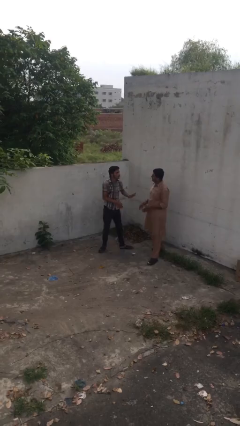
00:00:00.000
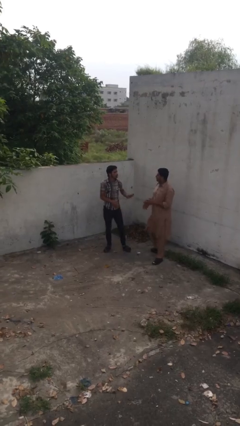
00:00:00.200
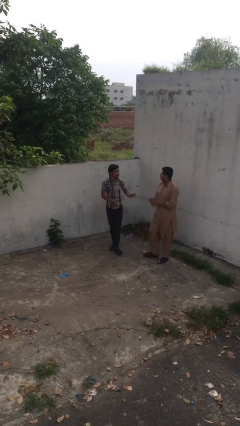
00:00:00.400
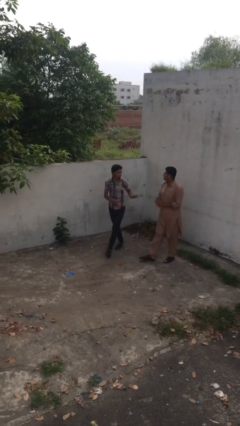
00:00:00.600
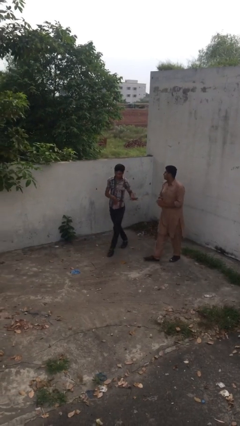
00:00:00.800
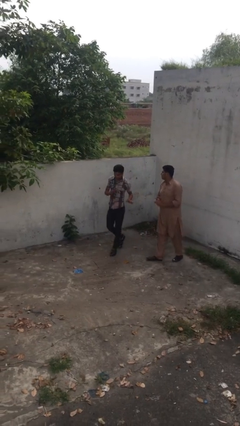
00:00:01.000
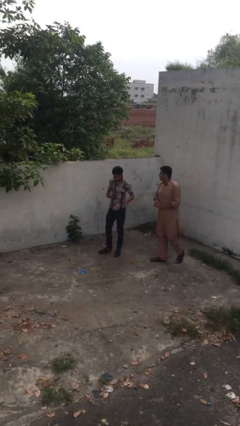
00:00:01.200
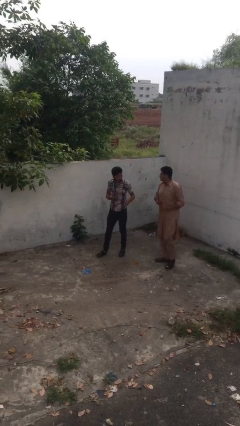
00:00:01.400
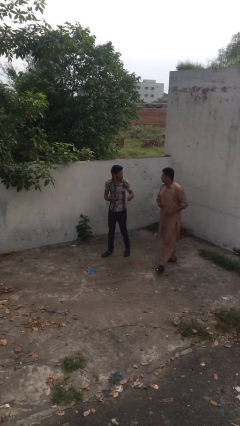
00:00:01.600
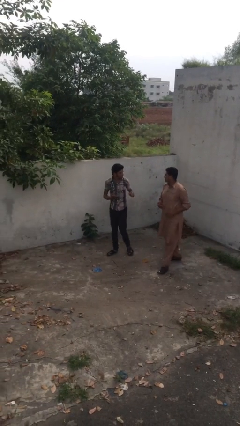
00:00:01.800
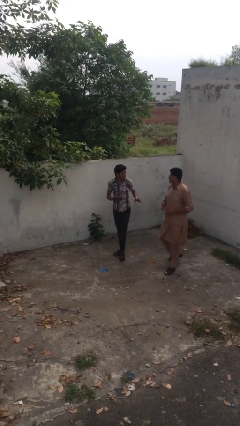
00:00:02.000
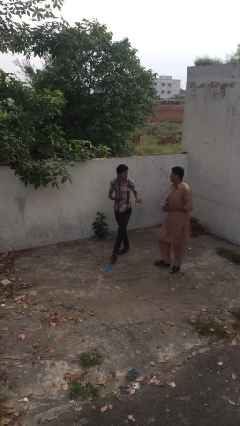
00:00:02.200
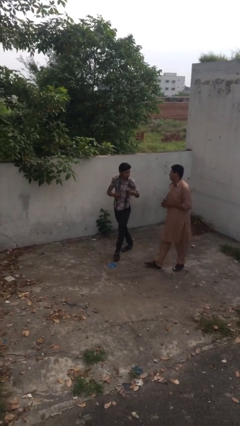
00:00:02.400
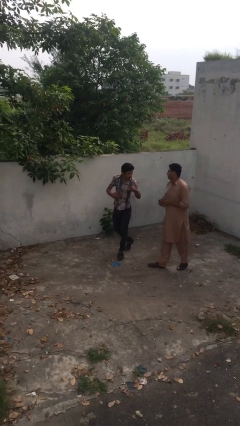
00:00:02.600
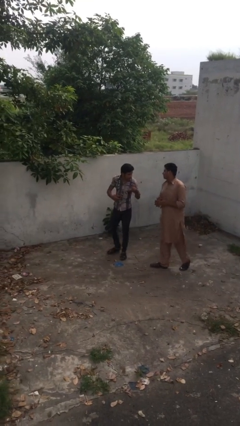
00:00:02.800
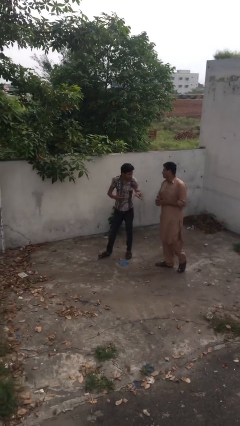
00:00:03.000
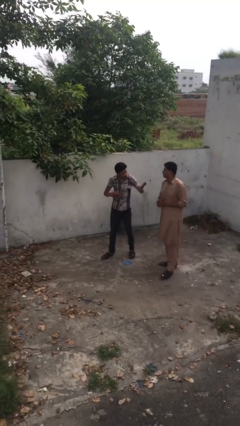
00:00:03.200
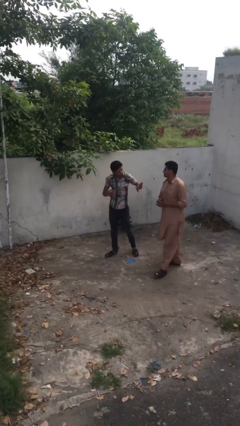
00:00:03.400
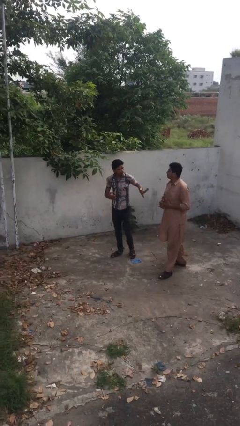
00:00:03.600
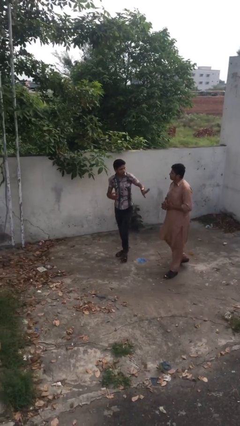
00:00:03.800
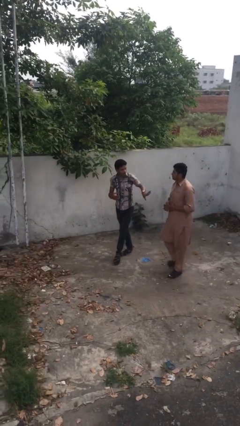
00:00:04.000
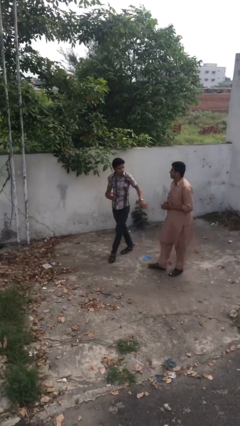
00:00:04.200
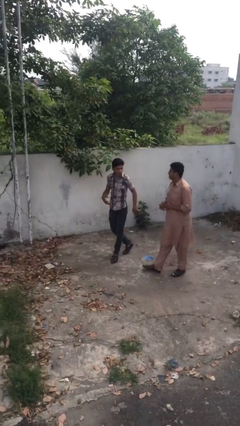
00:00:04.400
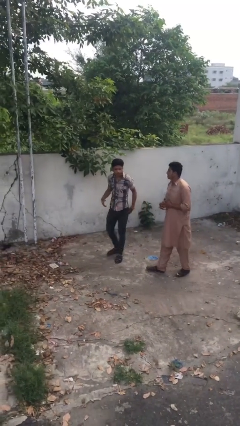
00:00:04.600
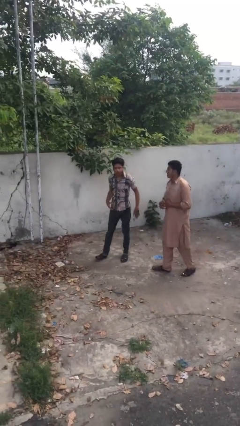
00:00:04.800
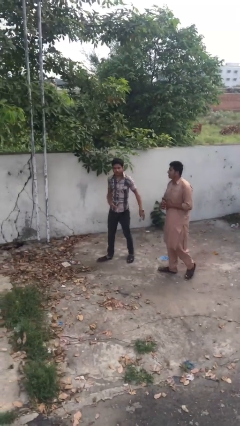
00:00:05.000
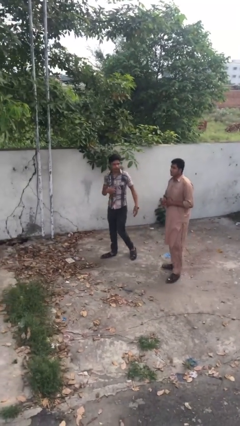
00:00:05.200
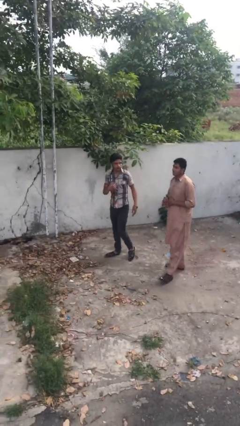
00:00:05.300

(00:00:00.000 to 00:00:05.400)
person talks to person

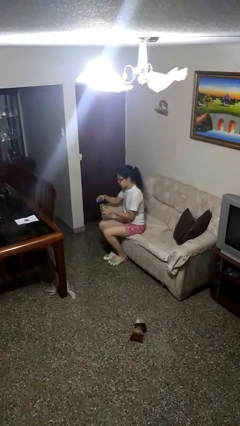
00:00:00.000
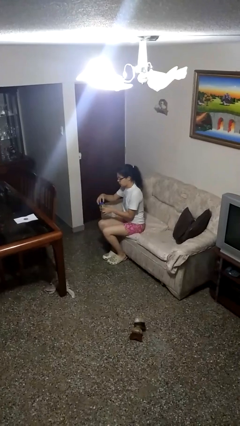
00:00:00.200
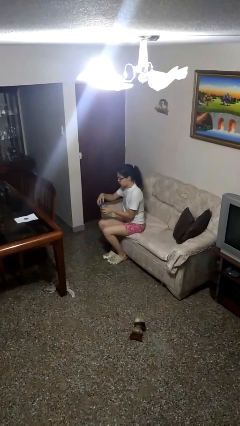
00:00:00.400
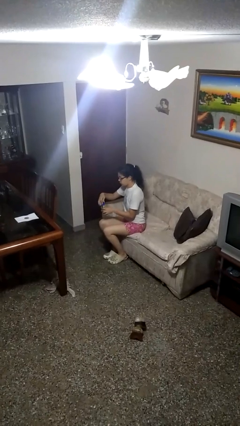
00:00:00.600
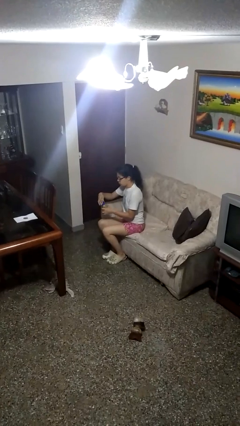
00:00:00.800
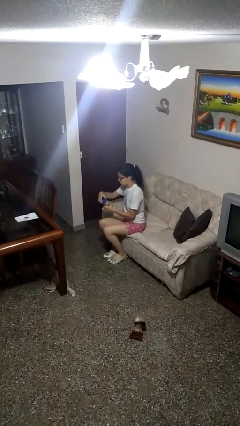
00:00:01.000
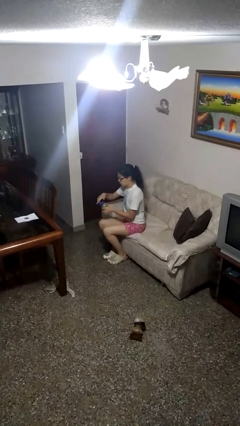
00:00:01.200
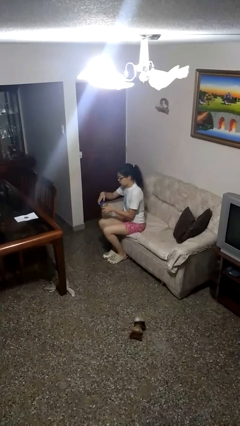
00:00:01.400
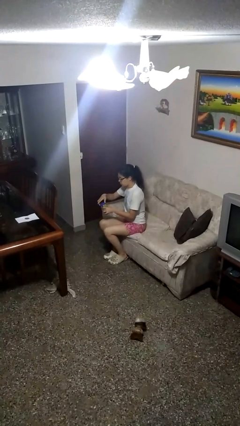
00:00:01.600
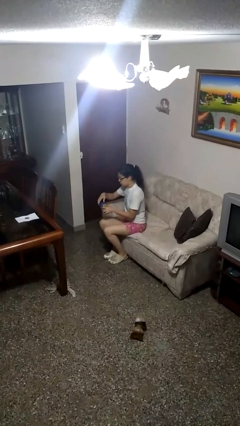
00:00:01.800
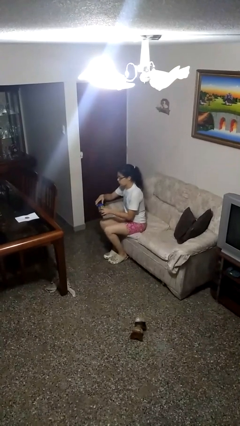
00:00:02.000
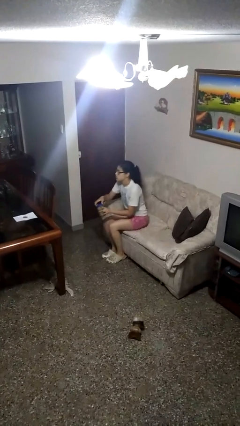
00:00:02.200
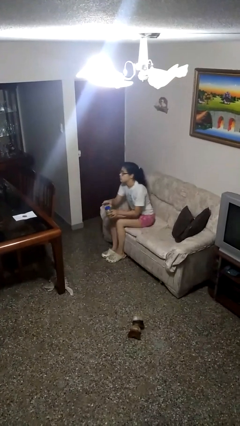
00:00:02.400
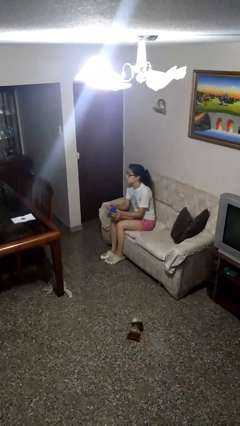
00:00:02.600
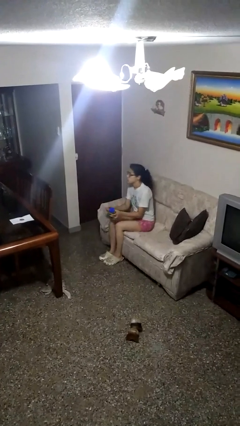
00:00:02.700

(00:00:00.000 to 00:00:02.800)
person closes jar

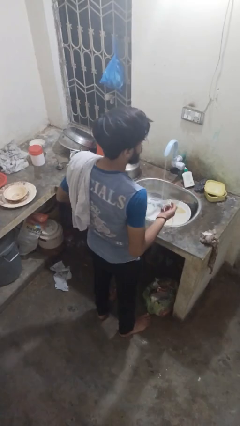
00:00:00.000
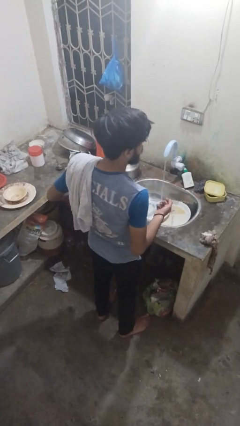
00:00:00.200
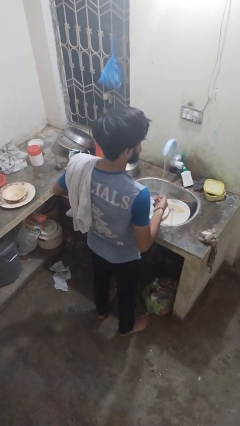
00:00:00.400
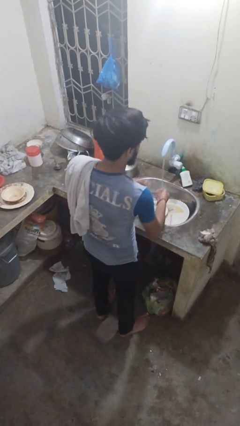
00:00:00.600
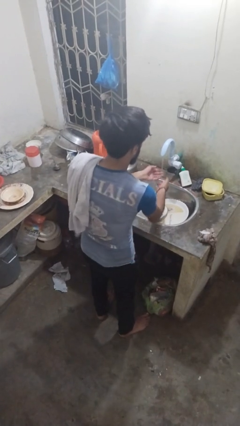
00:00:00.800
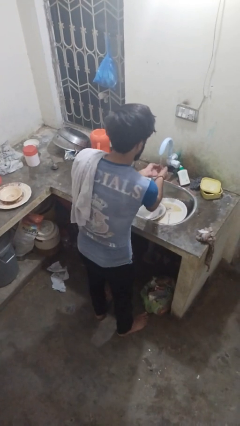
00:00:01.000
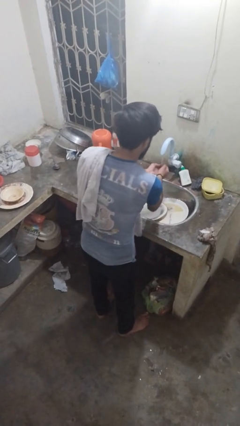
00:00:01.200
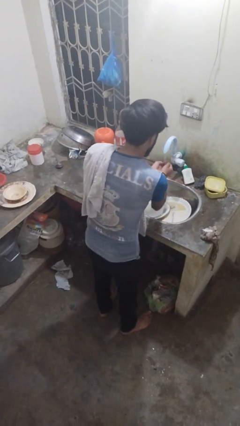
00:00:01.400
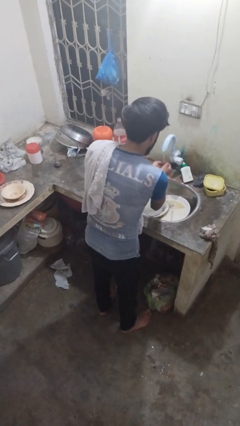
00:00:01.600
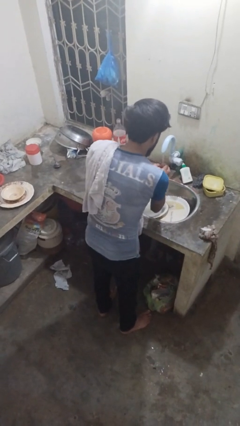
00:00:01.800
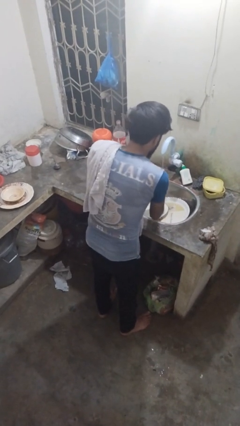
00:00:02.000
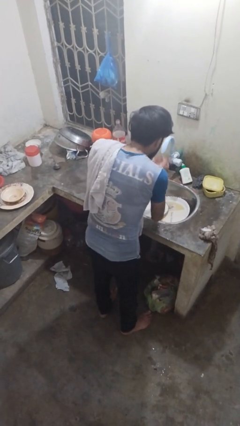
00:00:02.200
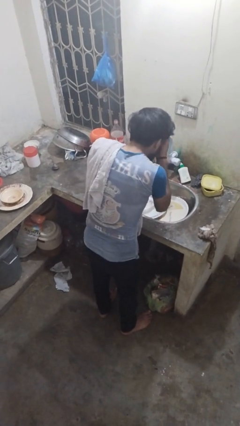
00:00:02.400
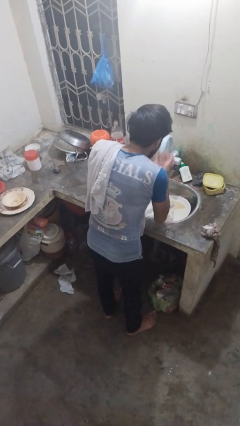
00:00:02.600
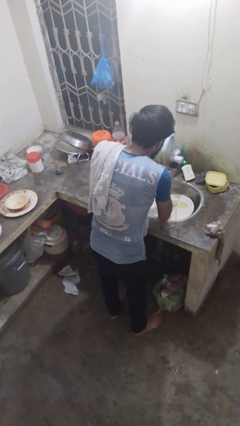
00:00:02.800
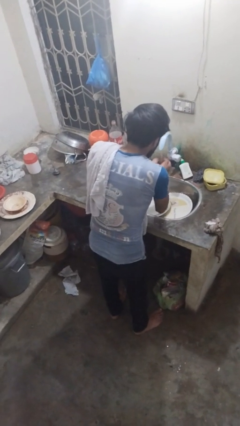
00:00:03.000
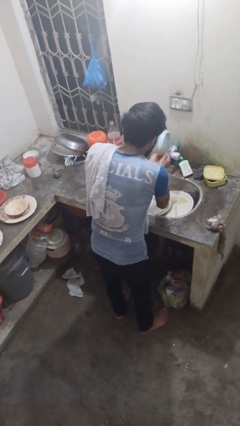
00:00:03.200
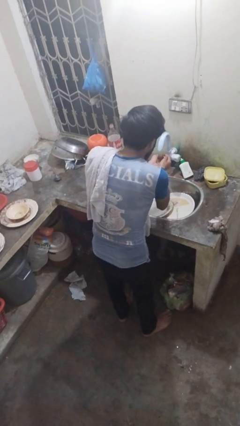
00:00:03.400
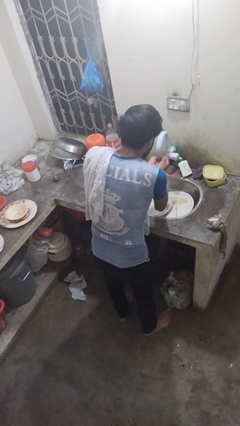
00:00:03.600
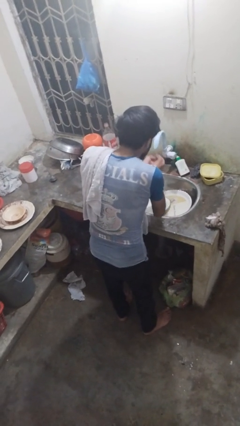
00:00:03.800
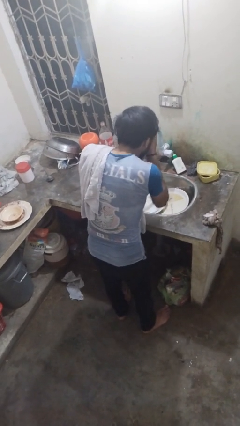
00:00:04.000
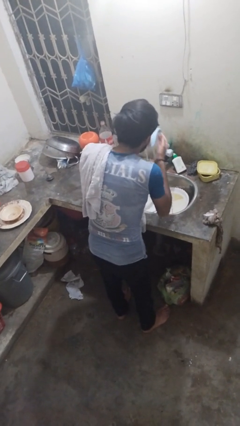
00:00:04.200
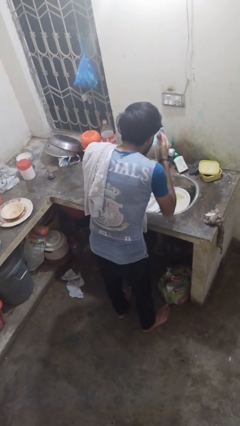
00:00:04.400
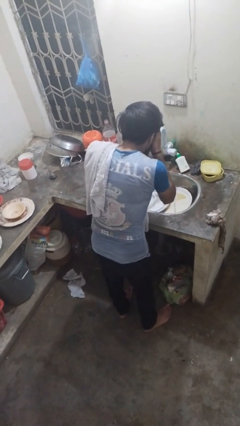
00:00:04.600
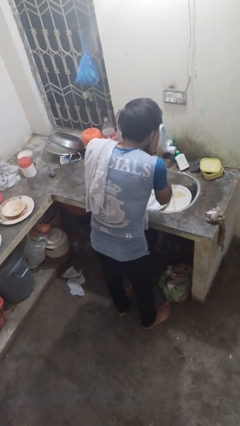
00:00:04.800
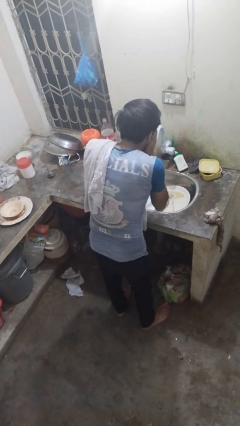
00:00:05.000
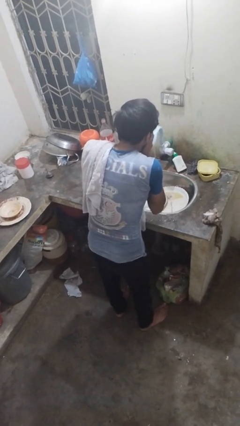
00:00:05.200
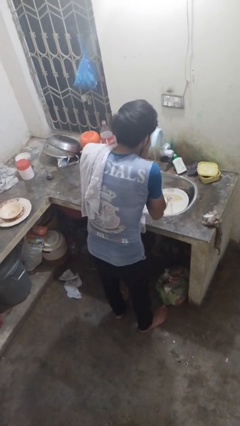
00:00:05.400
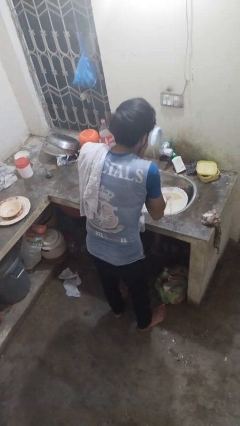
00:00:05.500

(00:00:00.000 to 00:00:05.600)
person washes face

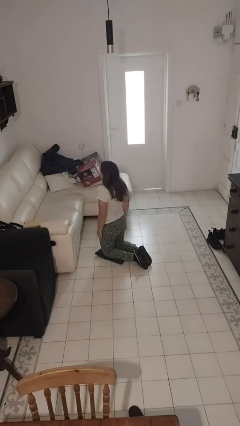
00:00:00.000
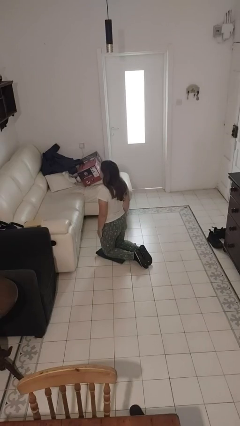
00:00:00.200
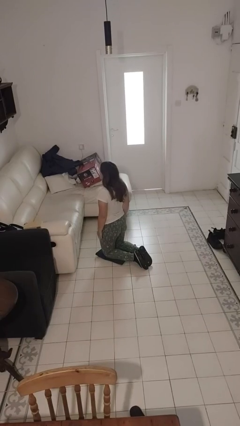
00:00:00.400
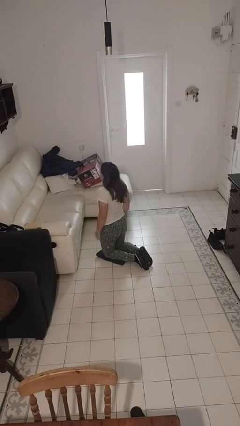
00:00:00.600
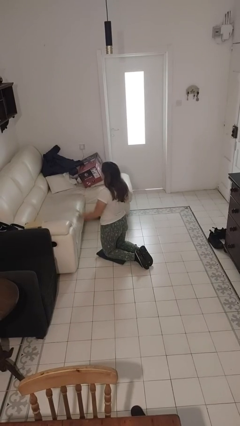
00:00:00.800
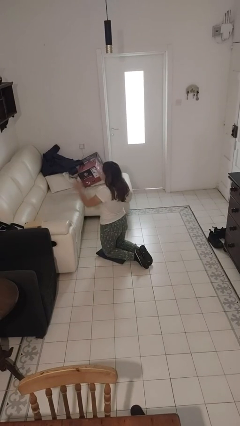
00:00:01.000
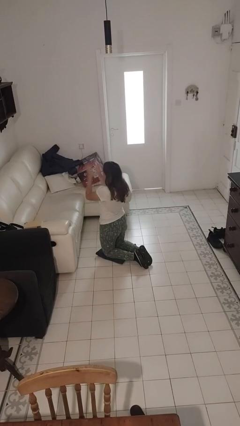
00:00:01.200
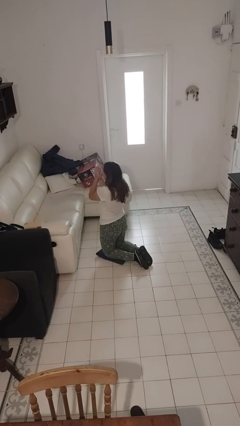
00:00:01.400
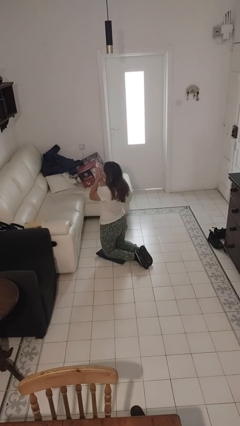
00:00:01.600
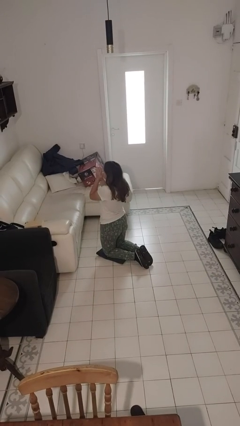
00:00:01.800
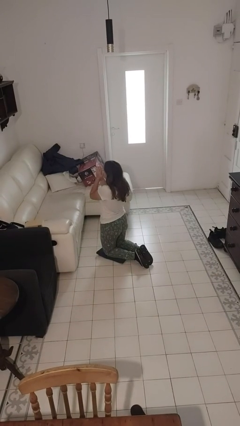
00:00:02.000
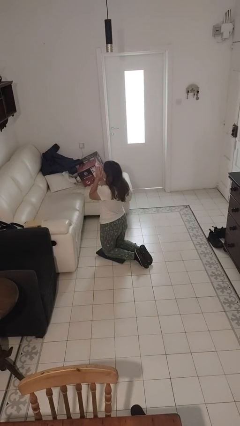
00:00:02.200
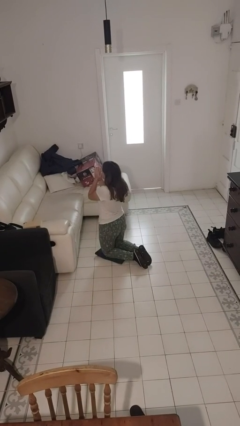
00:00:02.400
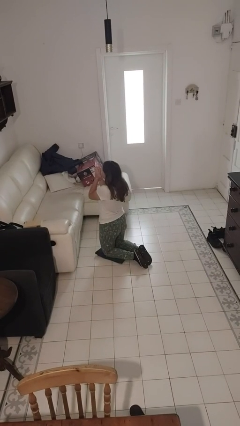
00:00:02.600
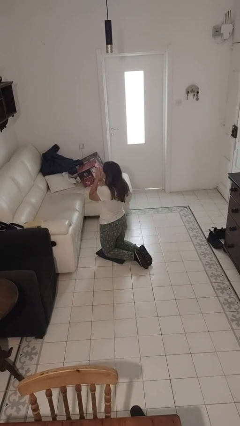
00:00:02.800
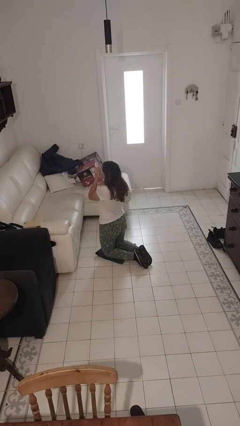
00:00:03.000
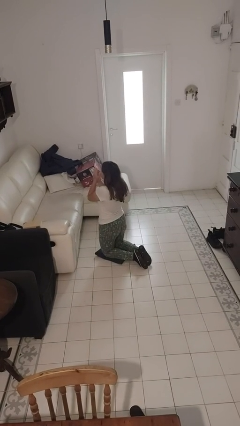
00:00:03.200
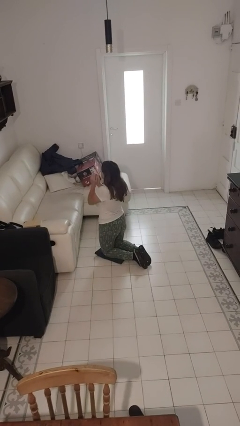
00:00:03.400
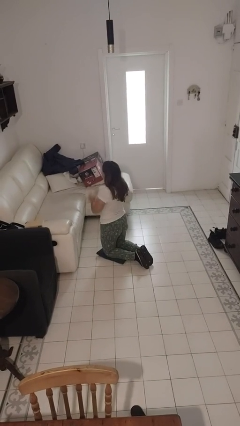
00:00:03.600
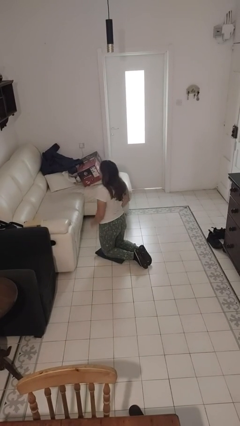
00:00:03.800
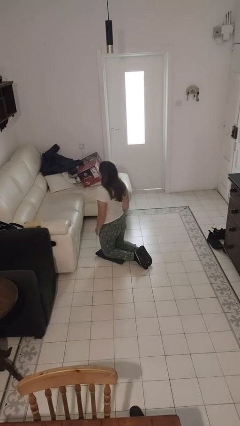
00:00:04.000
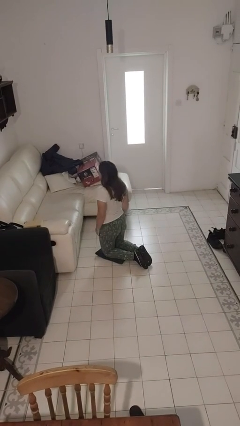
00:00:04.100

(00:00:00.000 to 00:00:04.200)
person prays
